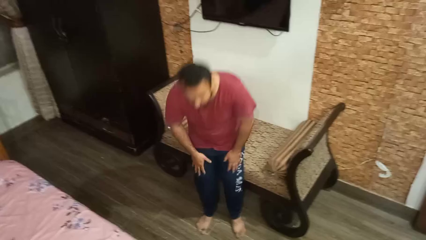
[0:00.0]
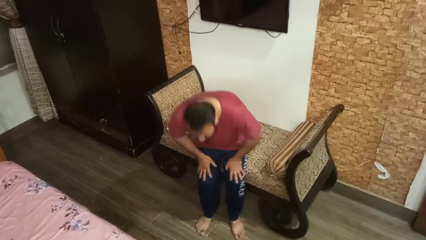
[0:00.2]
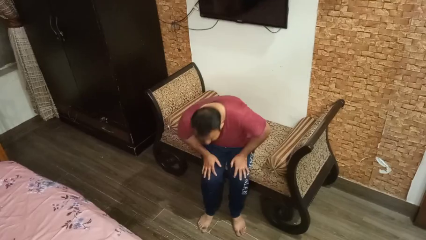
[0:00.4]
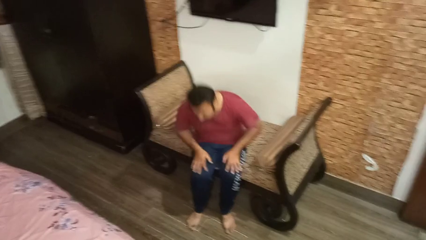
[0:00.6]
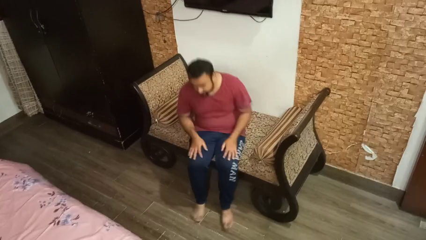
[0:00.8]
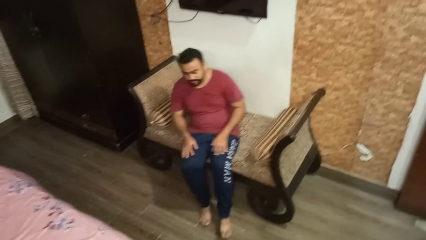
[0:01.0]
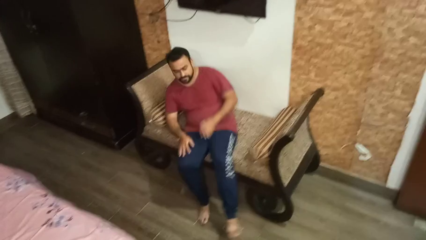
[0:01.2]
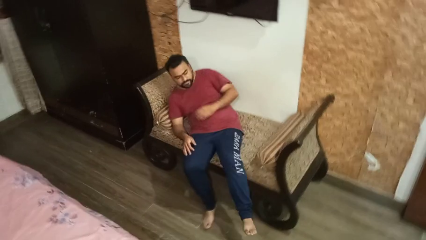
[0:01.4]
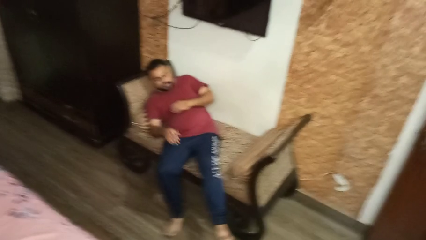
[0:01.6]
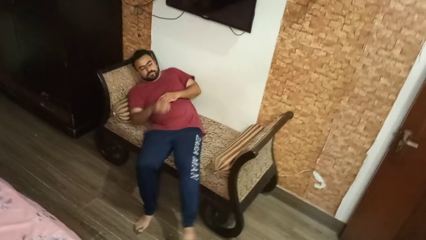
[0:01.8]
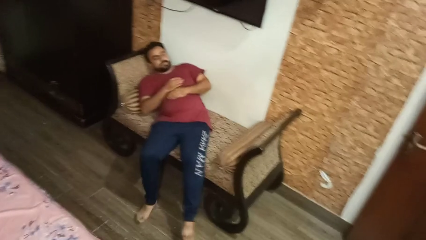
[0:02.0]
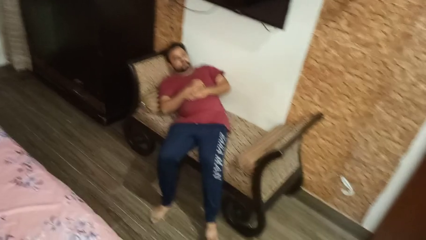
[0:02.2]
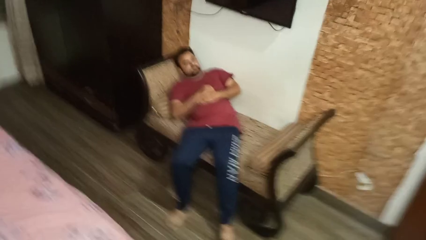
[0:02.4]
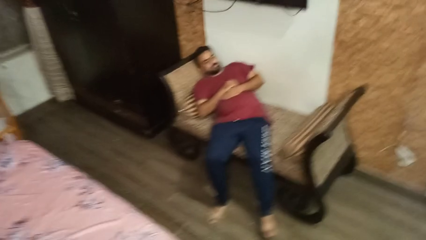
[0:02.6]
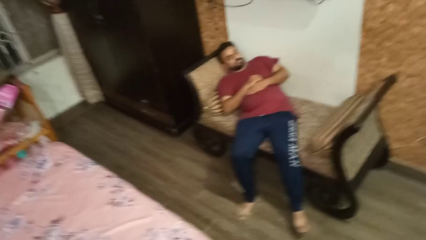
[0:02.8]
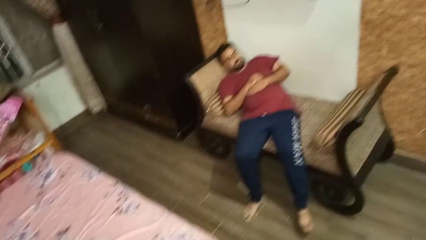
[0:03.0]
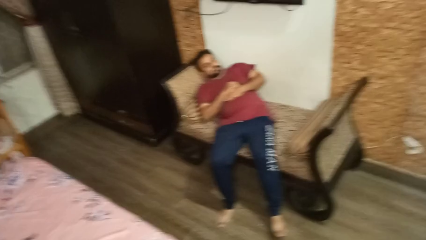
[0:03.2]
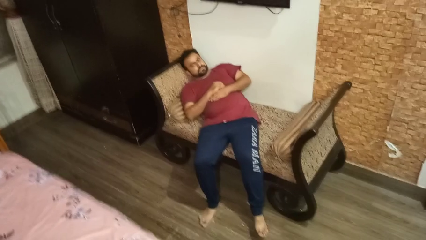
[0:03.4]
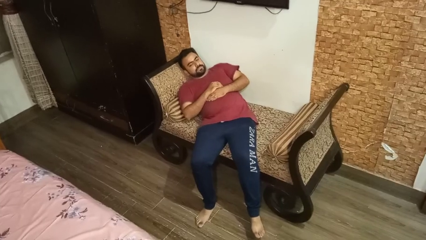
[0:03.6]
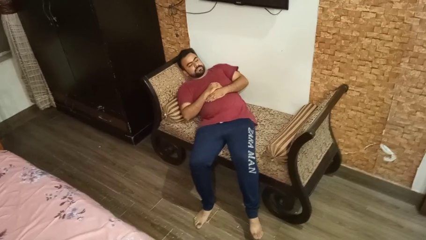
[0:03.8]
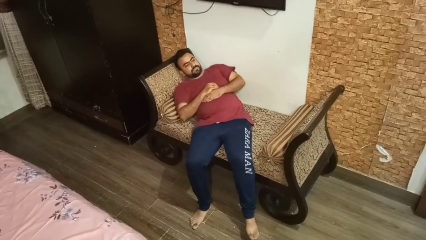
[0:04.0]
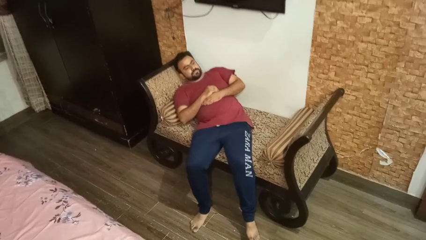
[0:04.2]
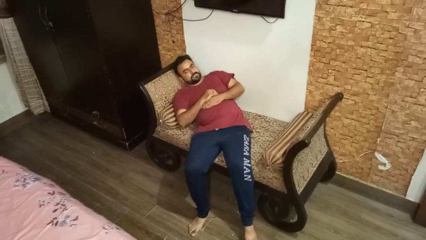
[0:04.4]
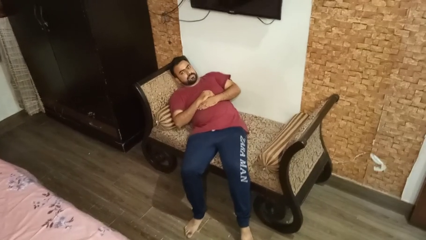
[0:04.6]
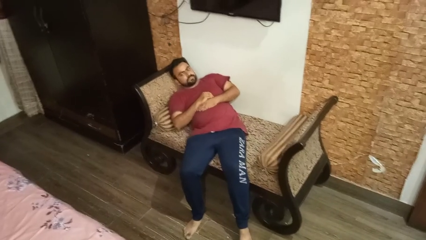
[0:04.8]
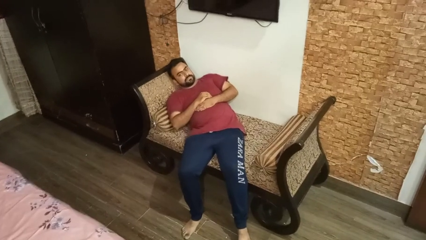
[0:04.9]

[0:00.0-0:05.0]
person lies down on couch

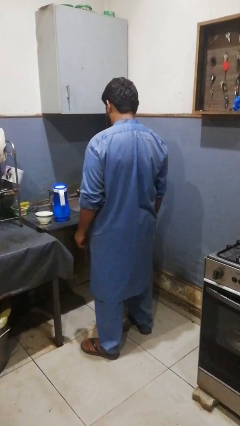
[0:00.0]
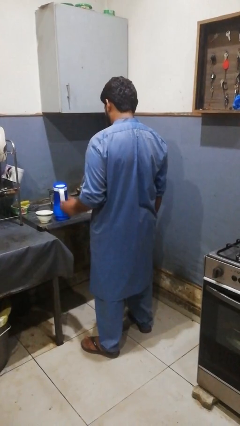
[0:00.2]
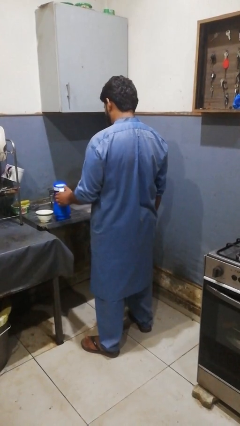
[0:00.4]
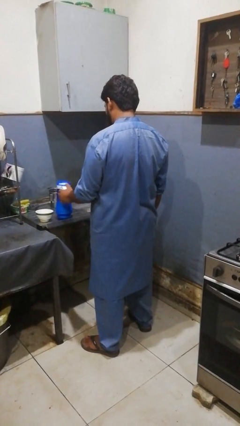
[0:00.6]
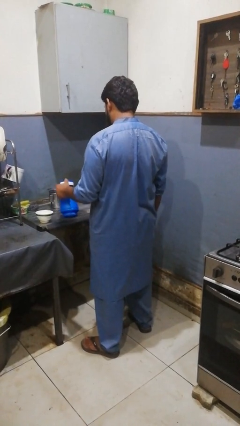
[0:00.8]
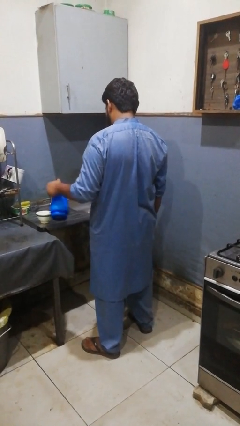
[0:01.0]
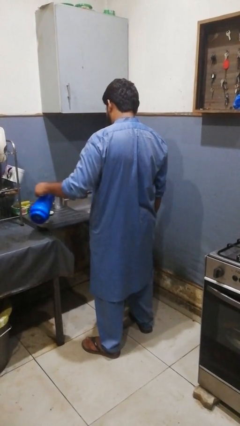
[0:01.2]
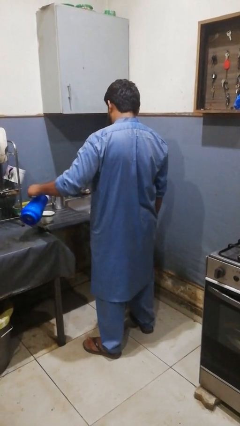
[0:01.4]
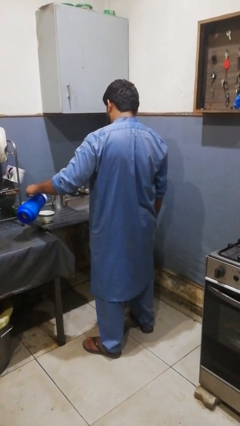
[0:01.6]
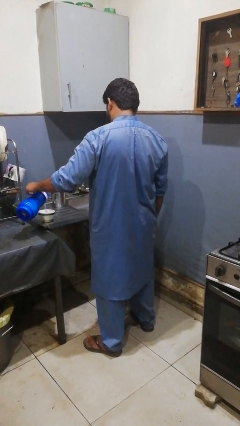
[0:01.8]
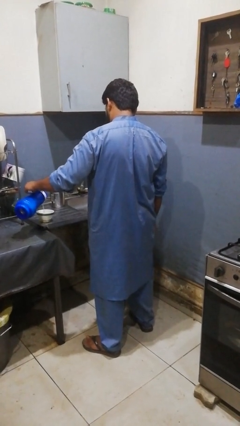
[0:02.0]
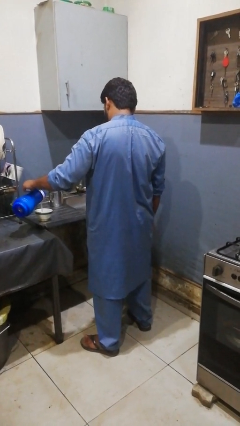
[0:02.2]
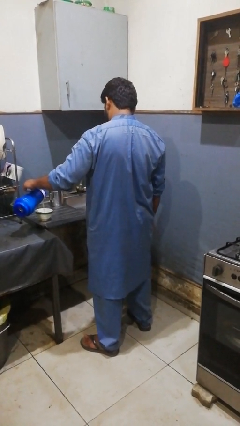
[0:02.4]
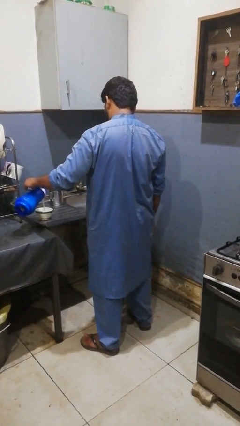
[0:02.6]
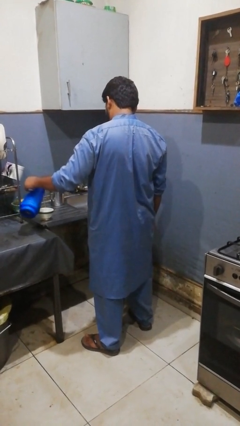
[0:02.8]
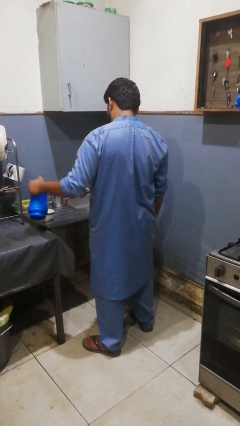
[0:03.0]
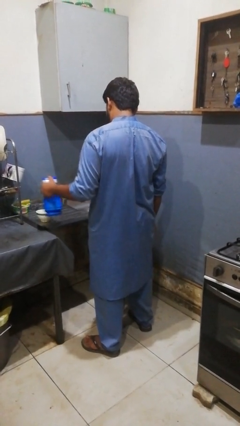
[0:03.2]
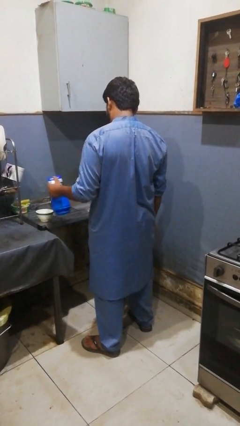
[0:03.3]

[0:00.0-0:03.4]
person pours into bowl

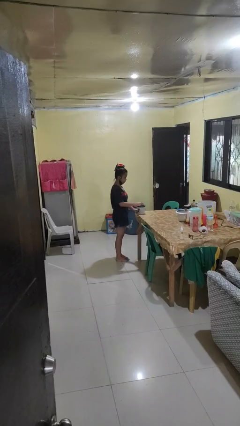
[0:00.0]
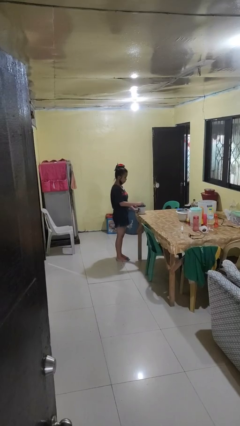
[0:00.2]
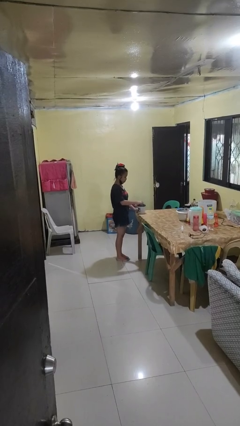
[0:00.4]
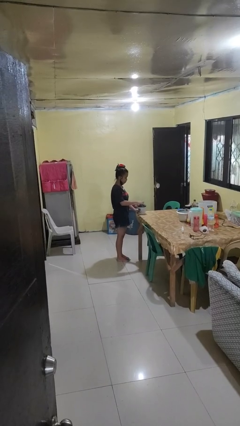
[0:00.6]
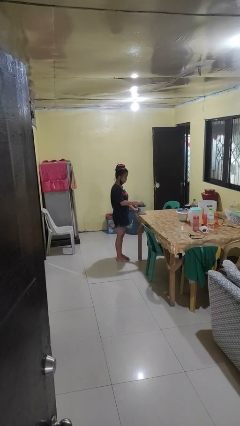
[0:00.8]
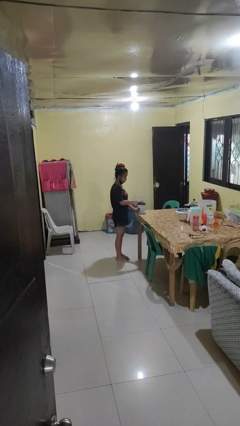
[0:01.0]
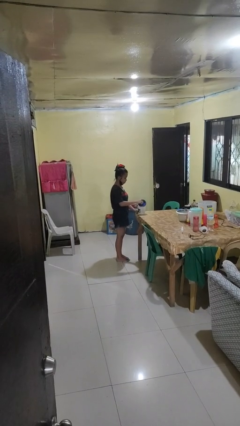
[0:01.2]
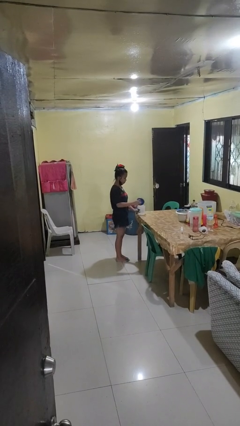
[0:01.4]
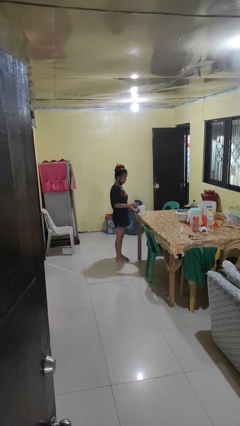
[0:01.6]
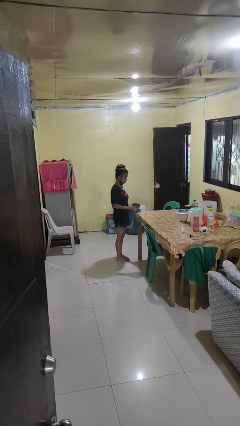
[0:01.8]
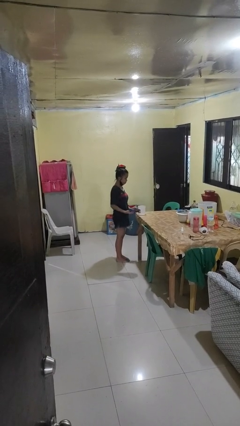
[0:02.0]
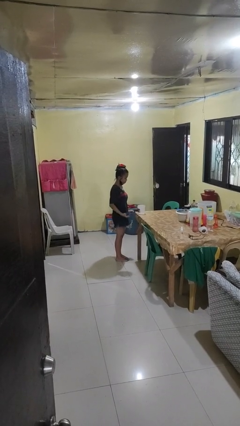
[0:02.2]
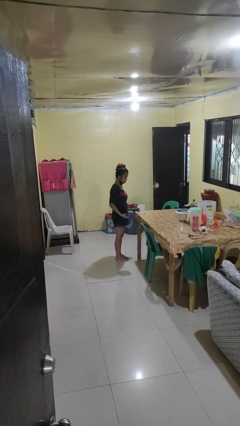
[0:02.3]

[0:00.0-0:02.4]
person opens jar

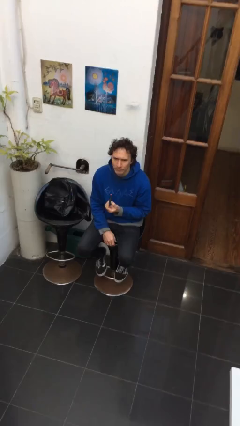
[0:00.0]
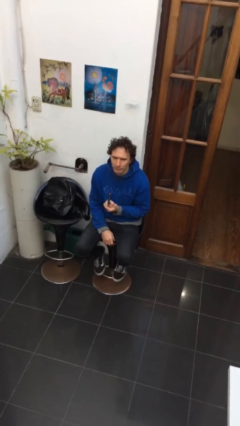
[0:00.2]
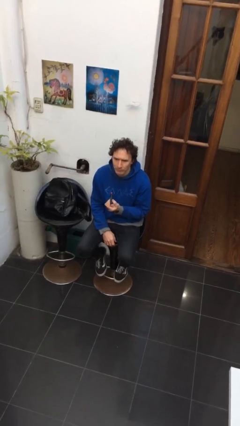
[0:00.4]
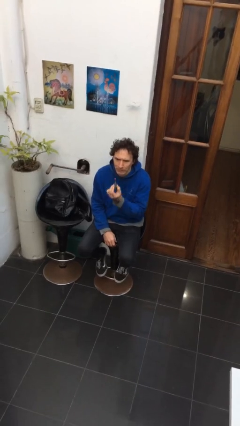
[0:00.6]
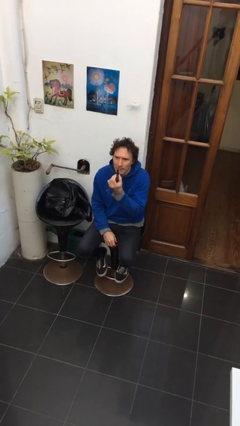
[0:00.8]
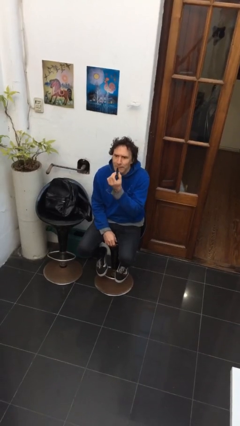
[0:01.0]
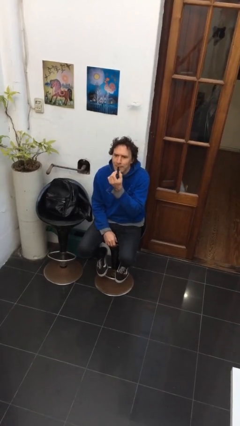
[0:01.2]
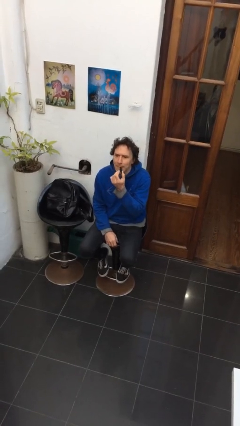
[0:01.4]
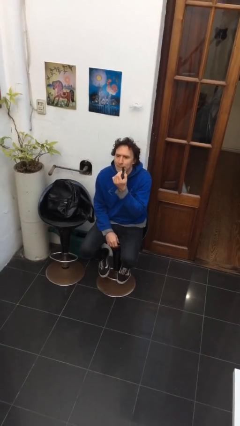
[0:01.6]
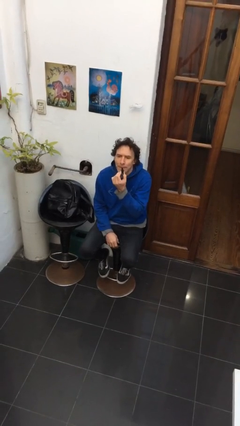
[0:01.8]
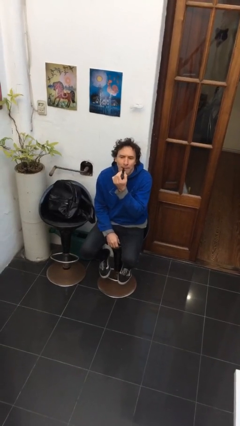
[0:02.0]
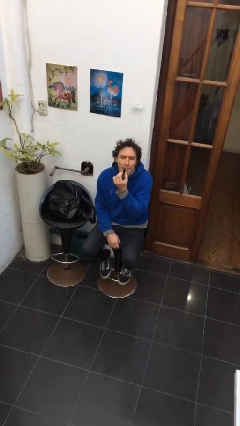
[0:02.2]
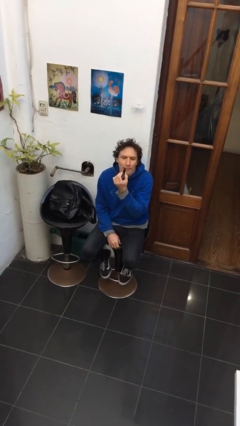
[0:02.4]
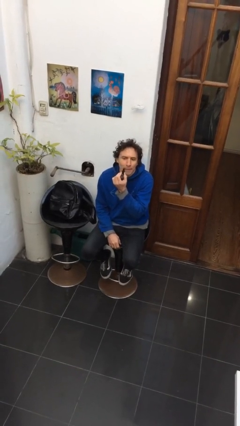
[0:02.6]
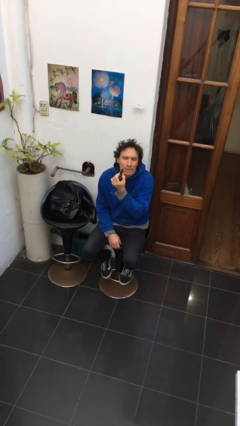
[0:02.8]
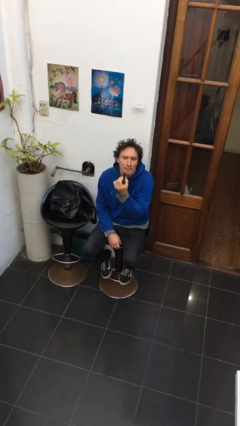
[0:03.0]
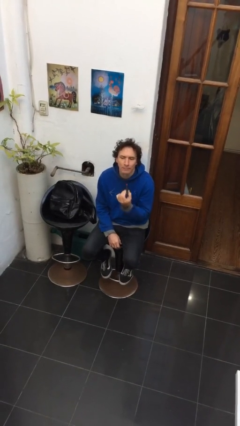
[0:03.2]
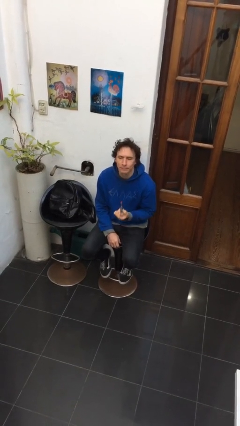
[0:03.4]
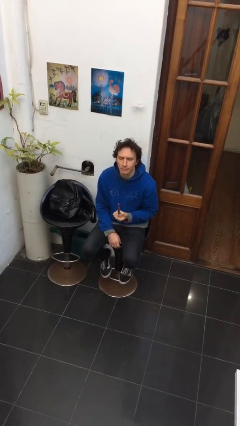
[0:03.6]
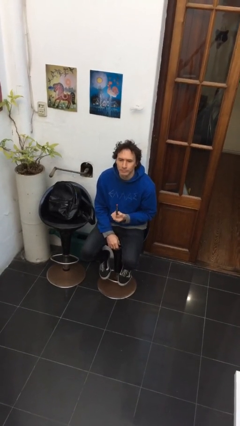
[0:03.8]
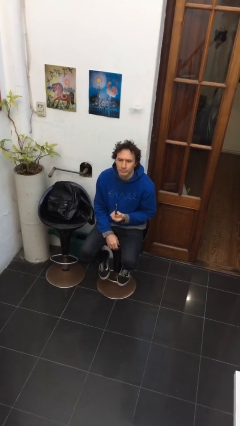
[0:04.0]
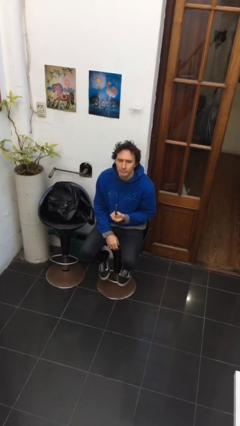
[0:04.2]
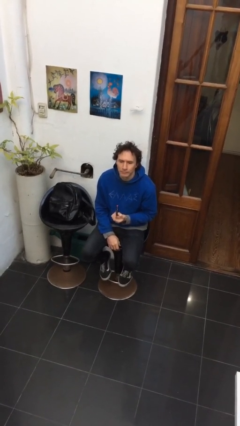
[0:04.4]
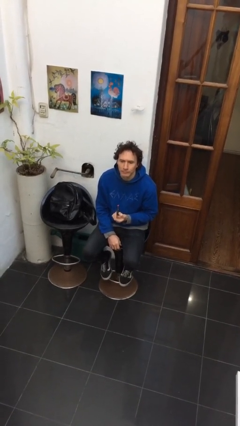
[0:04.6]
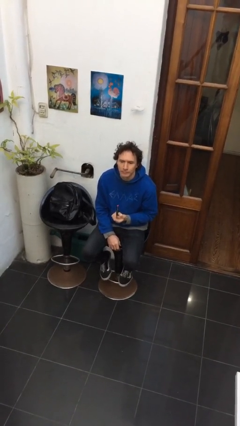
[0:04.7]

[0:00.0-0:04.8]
person applies lip makeup

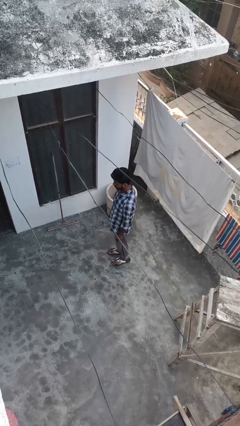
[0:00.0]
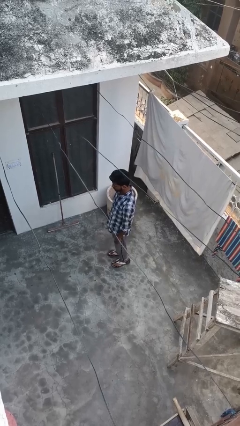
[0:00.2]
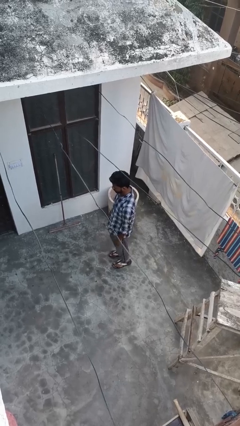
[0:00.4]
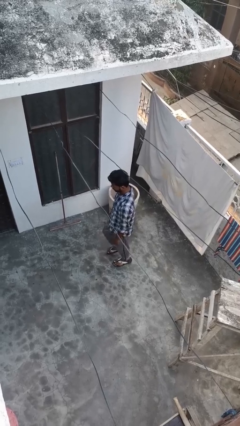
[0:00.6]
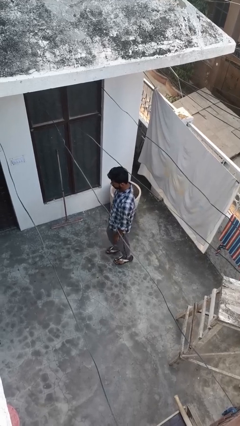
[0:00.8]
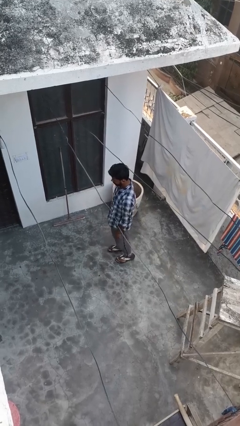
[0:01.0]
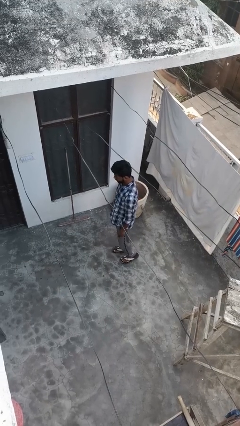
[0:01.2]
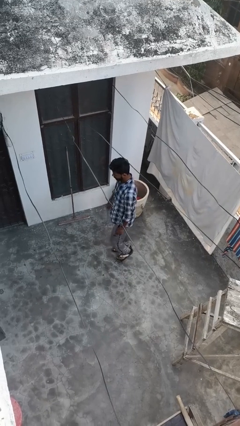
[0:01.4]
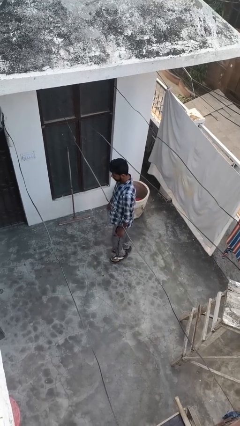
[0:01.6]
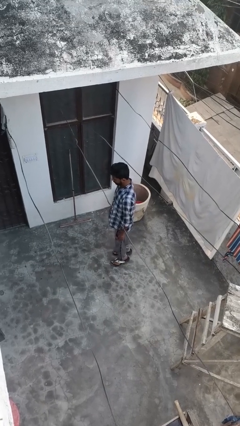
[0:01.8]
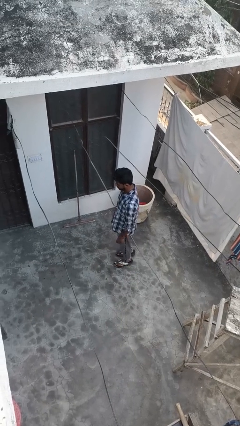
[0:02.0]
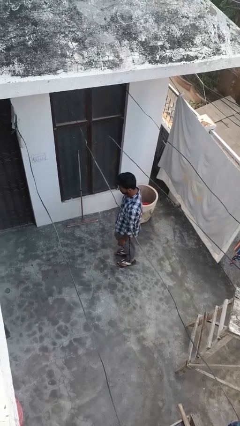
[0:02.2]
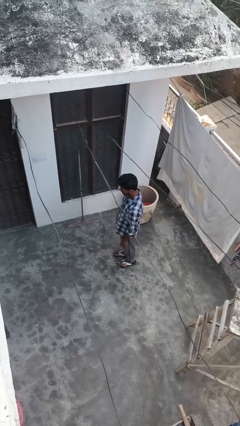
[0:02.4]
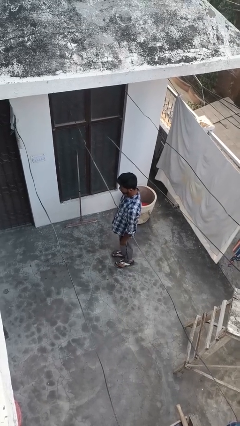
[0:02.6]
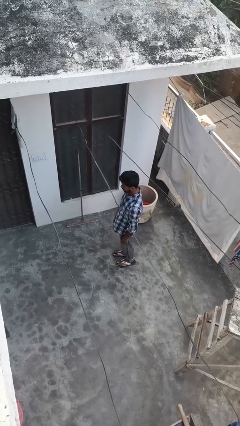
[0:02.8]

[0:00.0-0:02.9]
person walks tiptoe
